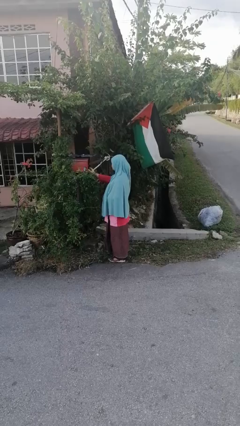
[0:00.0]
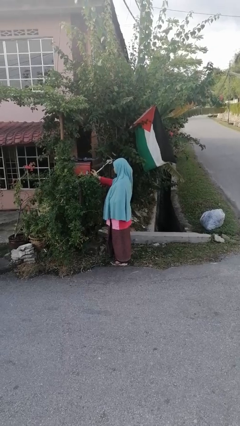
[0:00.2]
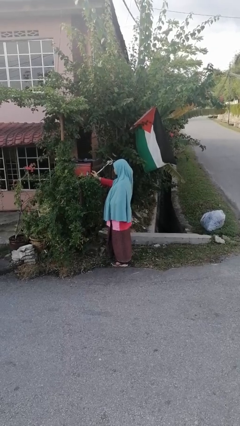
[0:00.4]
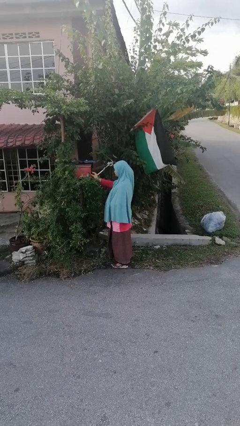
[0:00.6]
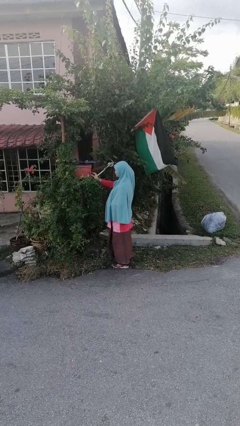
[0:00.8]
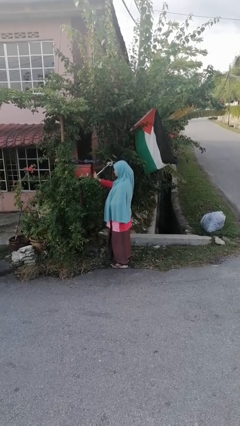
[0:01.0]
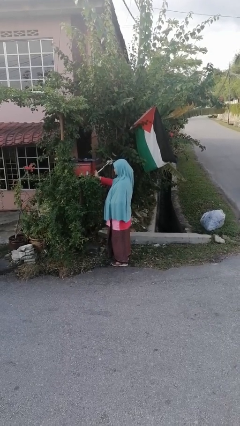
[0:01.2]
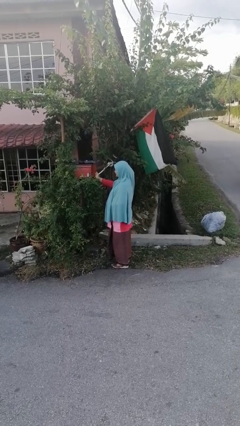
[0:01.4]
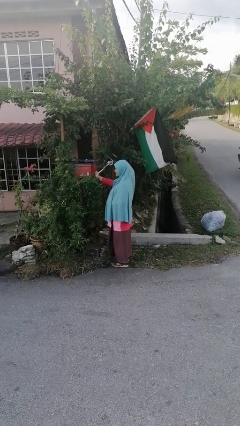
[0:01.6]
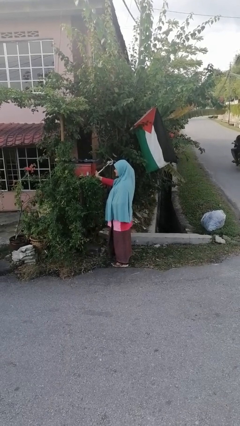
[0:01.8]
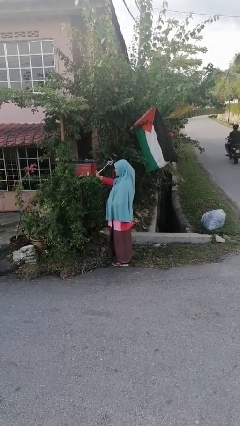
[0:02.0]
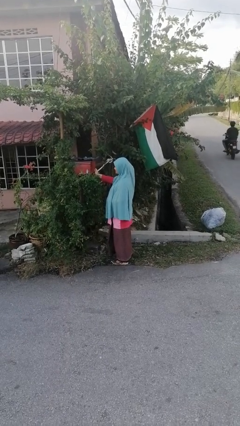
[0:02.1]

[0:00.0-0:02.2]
person opens mailbox

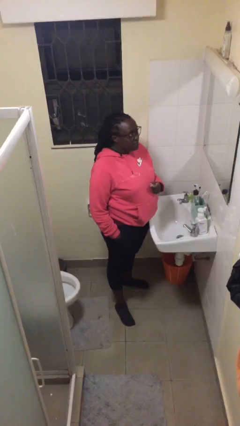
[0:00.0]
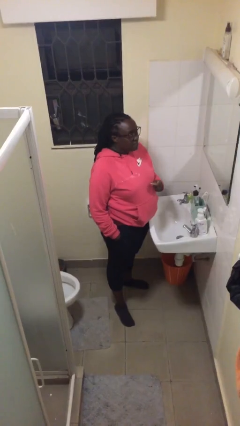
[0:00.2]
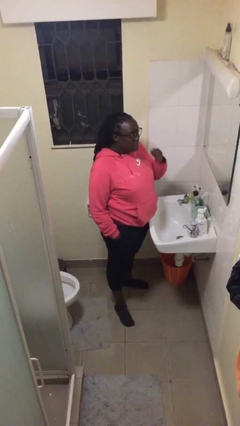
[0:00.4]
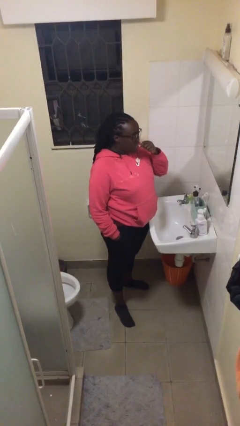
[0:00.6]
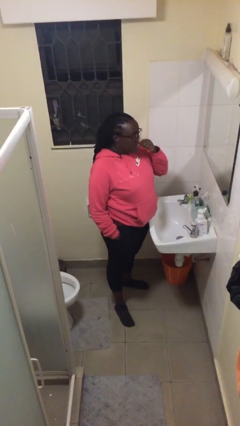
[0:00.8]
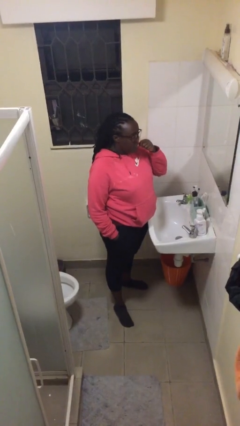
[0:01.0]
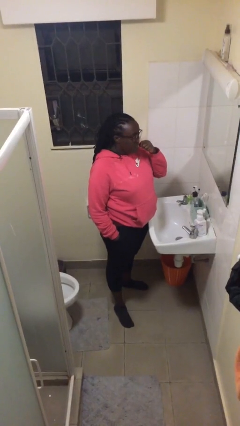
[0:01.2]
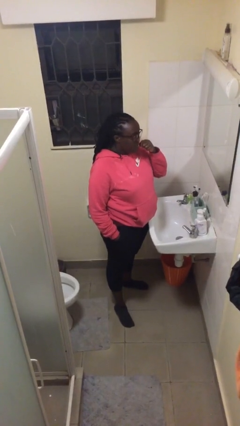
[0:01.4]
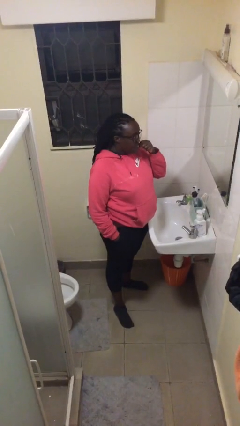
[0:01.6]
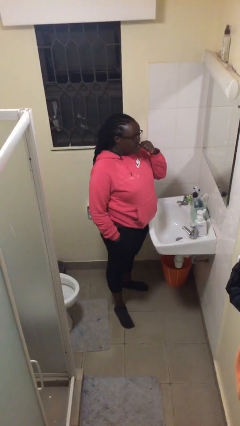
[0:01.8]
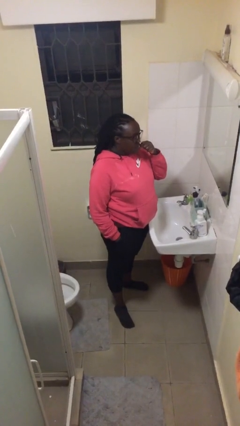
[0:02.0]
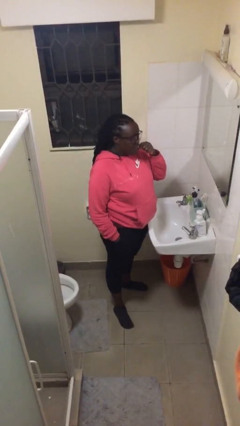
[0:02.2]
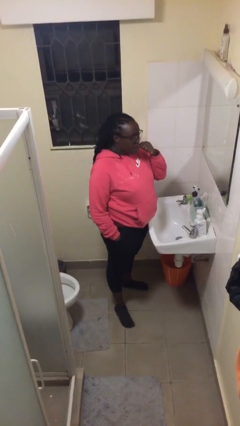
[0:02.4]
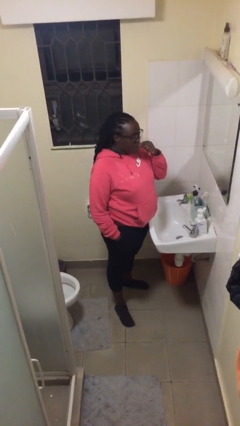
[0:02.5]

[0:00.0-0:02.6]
person flosses

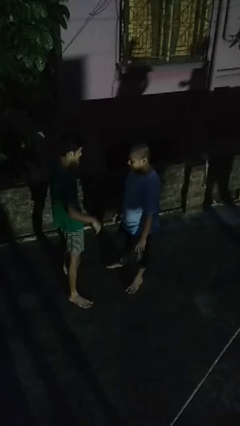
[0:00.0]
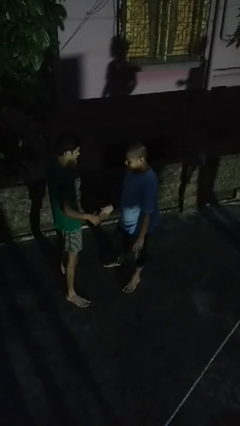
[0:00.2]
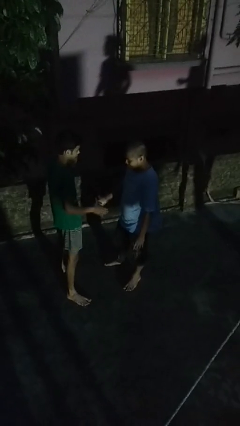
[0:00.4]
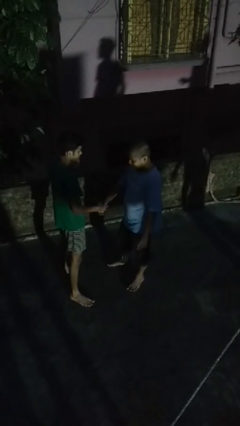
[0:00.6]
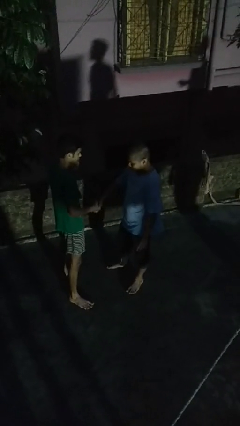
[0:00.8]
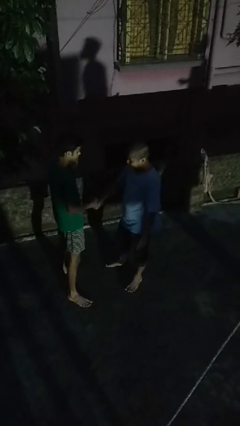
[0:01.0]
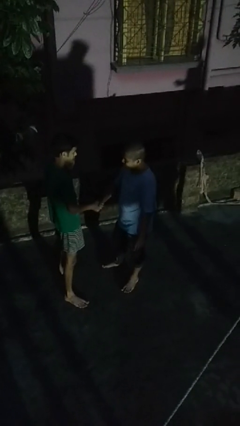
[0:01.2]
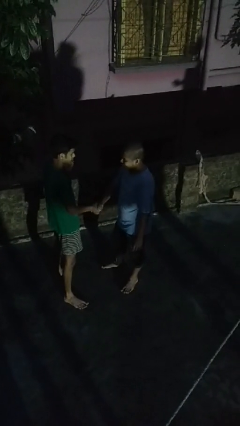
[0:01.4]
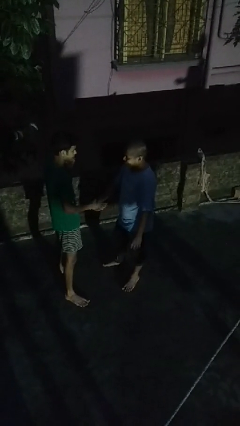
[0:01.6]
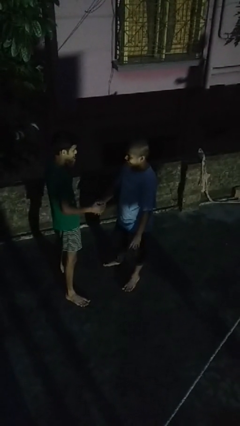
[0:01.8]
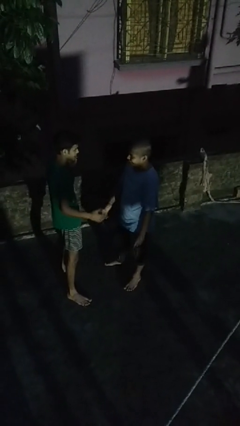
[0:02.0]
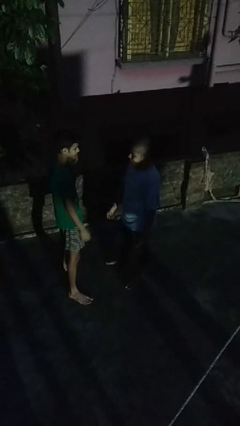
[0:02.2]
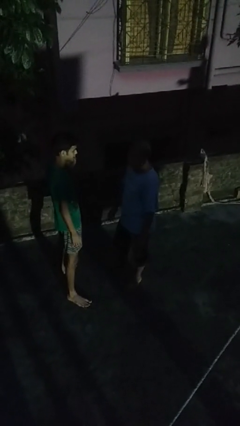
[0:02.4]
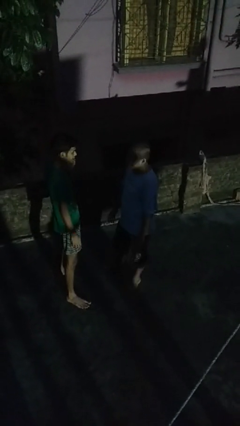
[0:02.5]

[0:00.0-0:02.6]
person highfives hand

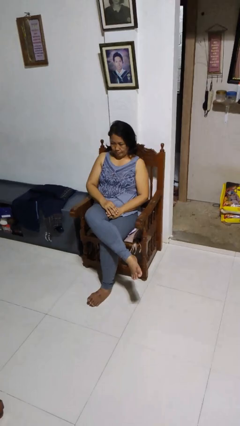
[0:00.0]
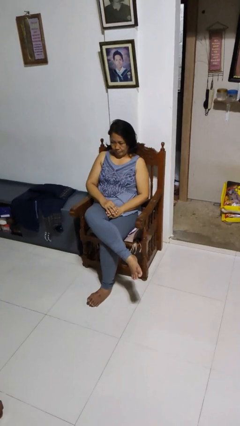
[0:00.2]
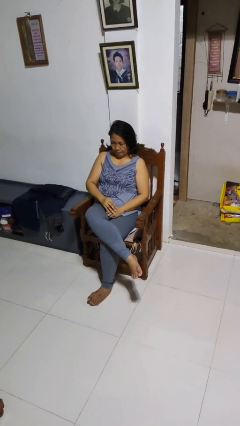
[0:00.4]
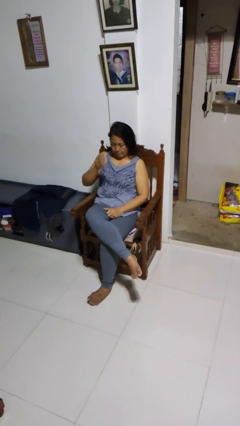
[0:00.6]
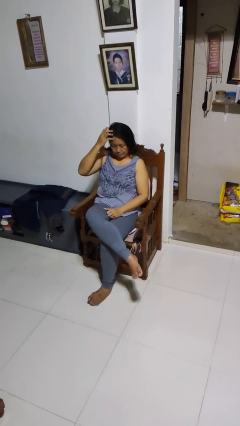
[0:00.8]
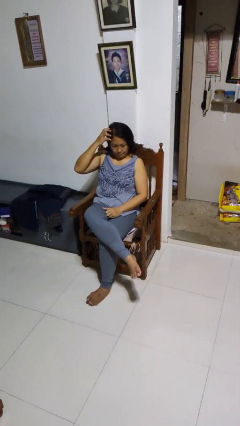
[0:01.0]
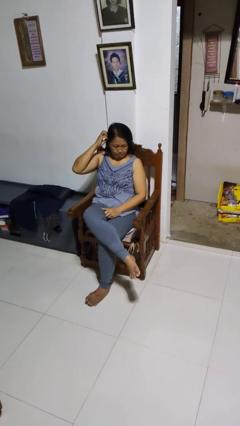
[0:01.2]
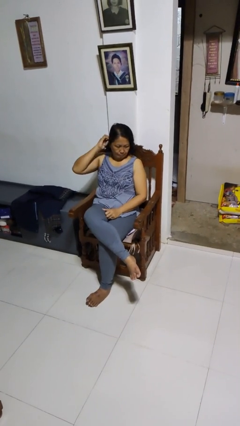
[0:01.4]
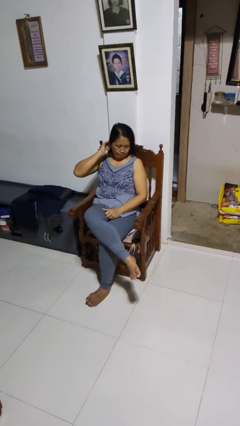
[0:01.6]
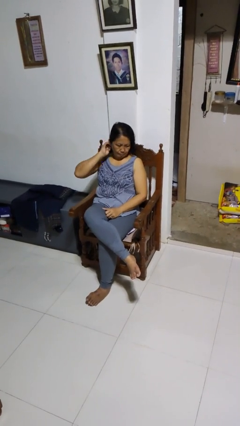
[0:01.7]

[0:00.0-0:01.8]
person strokes hair

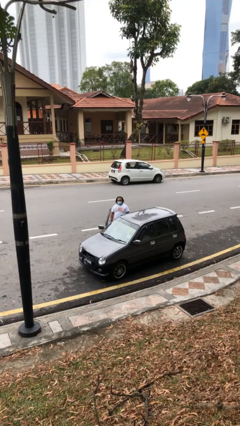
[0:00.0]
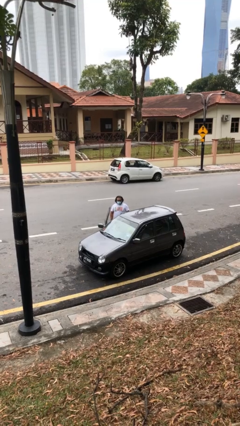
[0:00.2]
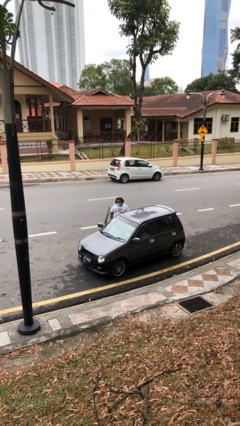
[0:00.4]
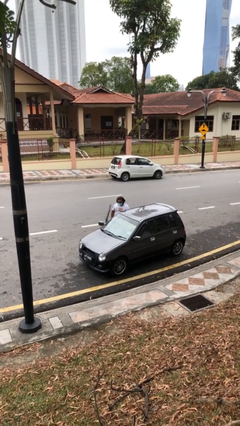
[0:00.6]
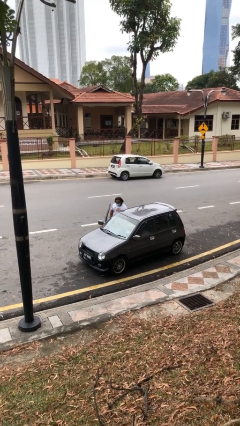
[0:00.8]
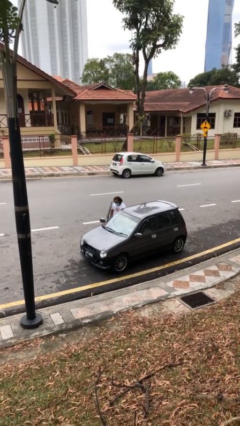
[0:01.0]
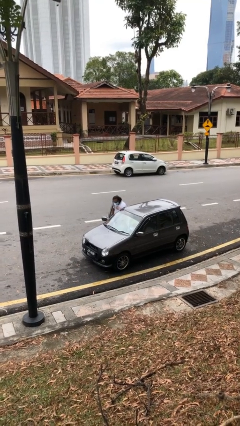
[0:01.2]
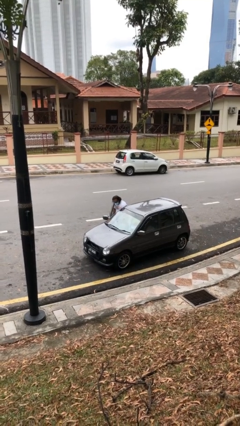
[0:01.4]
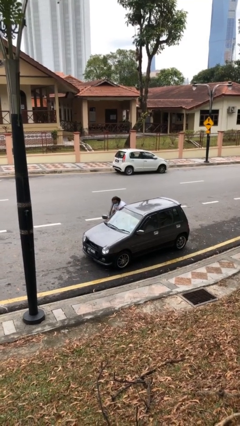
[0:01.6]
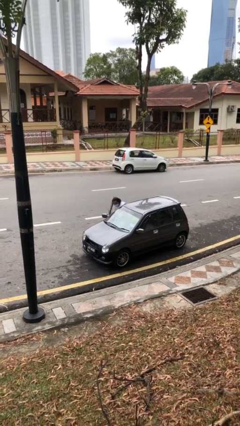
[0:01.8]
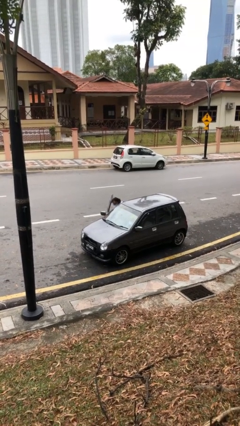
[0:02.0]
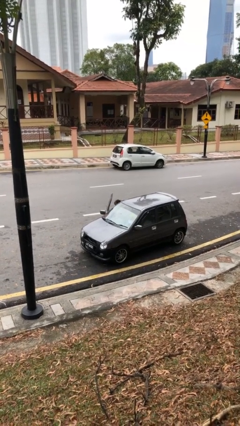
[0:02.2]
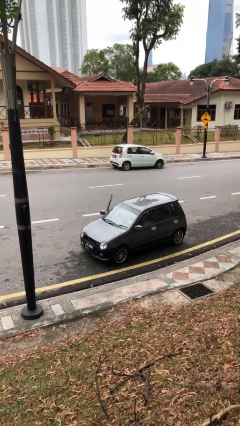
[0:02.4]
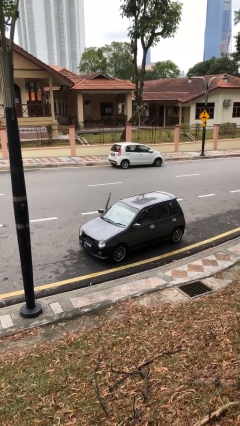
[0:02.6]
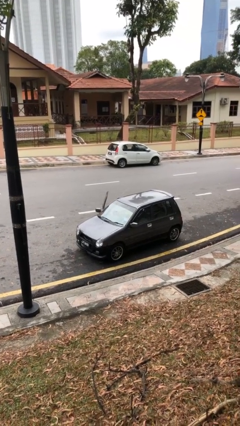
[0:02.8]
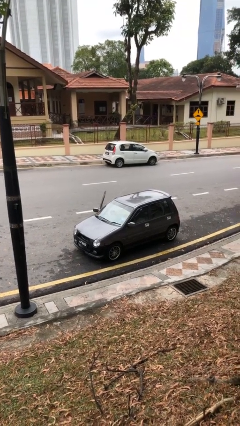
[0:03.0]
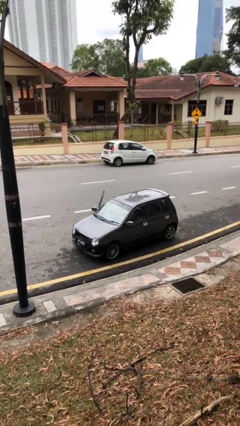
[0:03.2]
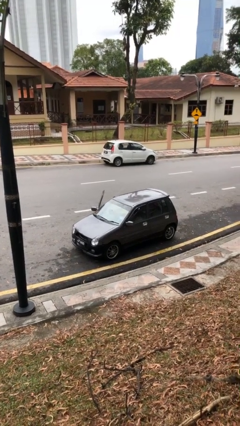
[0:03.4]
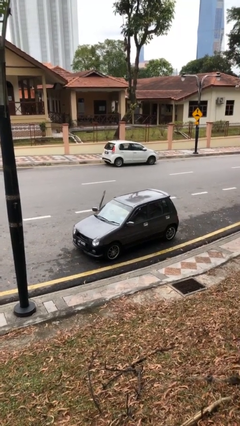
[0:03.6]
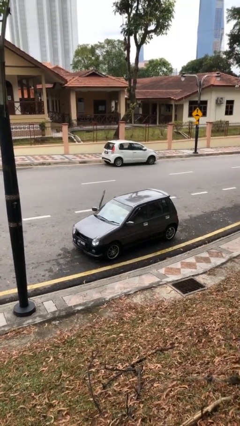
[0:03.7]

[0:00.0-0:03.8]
person enters car

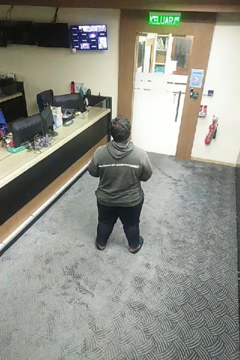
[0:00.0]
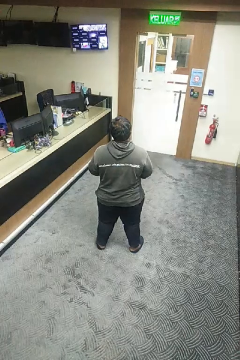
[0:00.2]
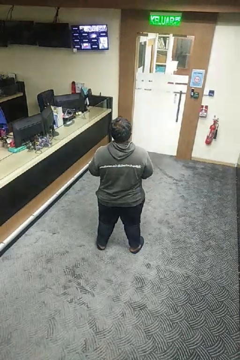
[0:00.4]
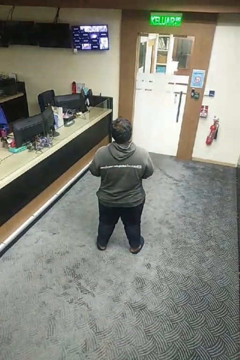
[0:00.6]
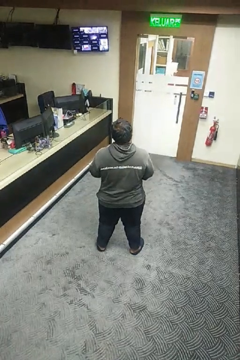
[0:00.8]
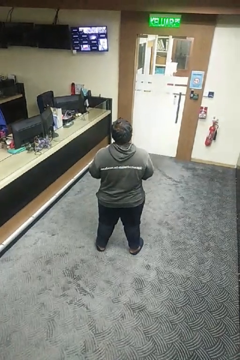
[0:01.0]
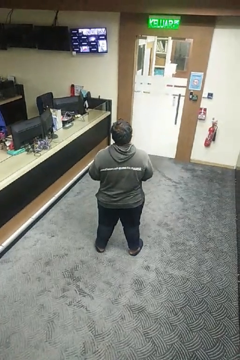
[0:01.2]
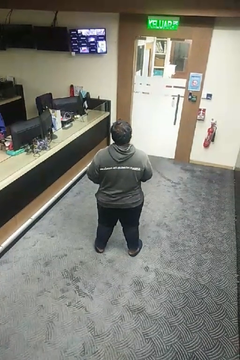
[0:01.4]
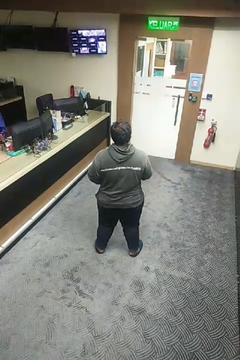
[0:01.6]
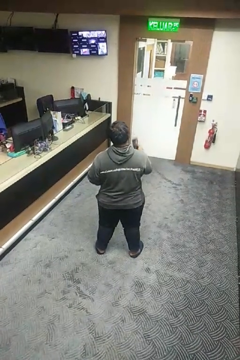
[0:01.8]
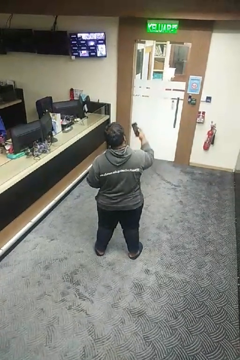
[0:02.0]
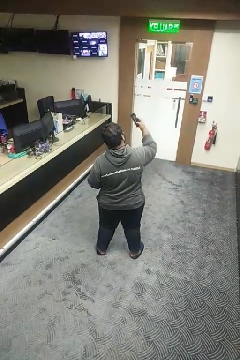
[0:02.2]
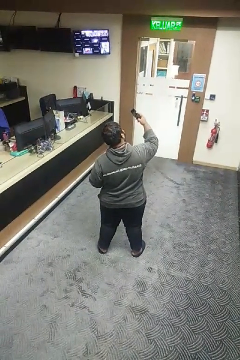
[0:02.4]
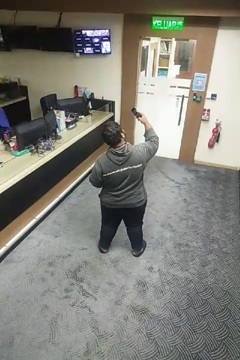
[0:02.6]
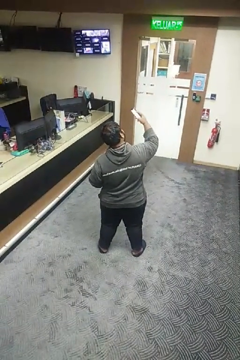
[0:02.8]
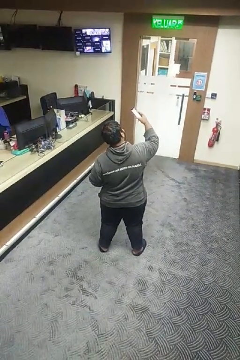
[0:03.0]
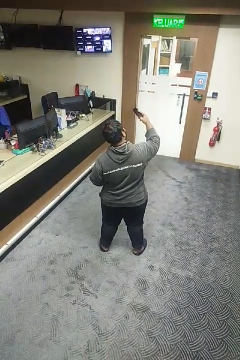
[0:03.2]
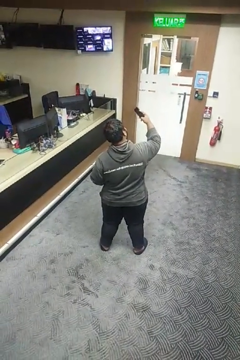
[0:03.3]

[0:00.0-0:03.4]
person takes selfie

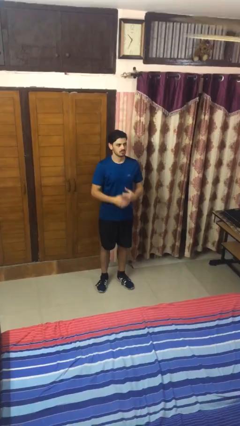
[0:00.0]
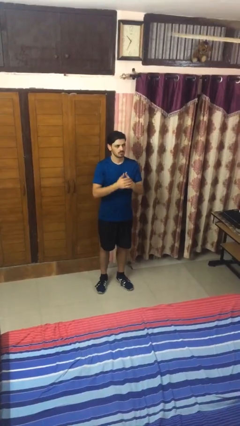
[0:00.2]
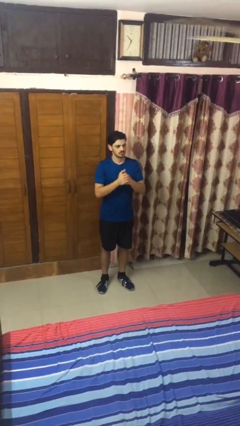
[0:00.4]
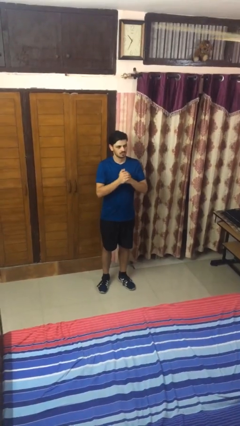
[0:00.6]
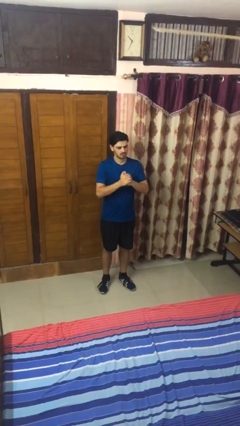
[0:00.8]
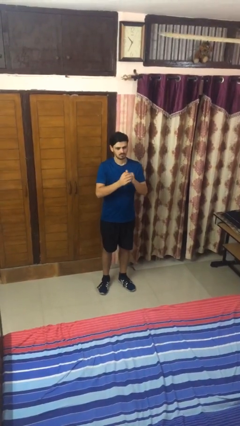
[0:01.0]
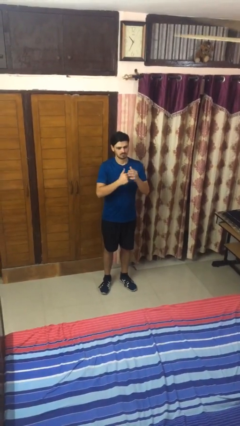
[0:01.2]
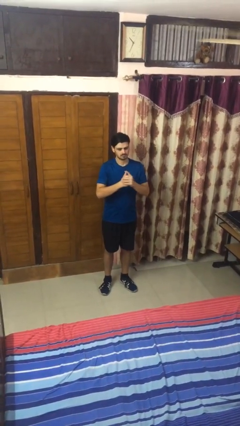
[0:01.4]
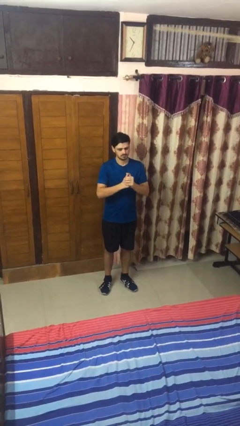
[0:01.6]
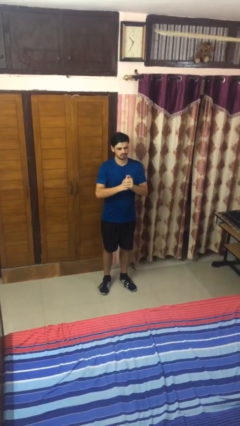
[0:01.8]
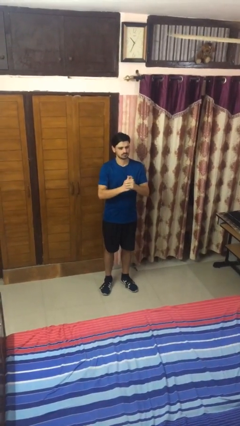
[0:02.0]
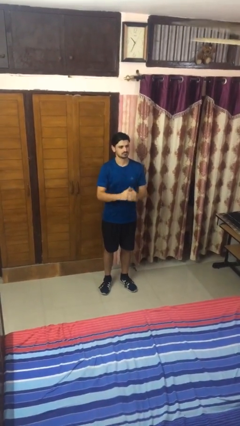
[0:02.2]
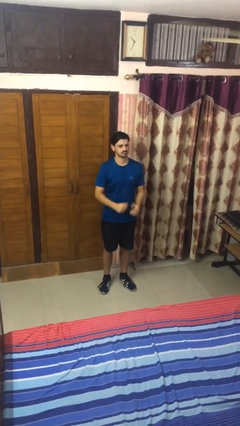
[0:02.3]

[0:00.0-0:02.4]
person cracks knuckles
